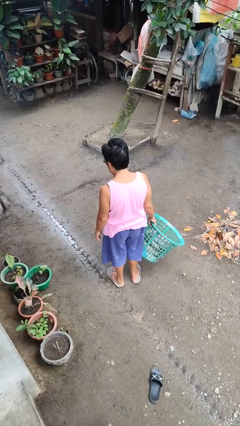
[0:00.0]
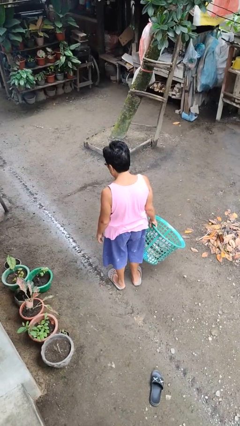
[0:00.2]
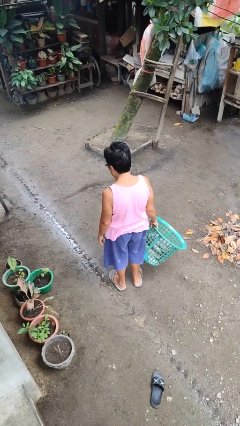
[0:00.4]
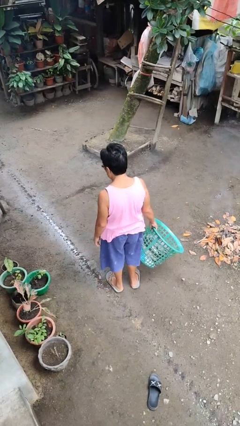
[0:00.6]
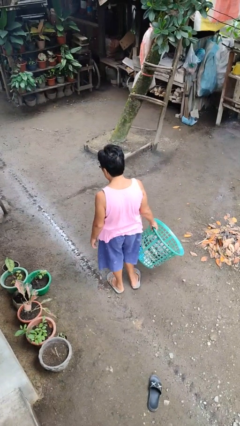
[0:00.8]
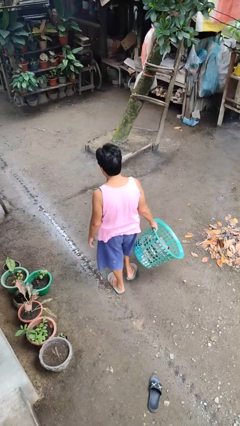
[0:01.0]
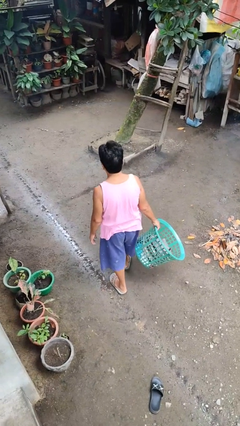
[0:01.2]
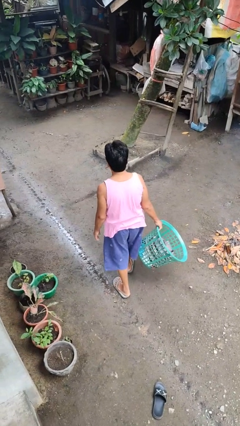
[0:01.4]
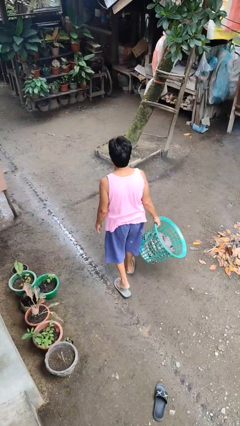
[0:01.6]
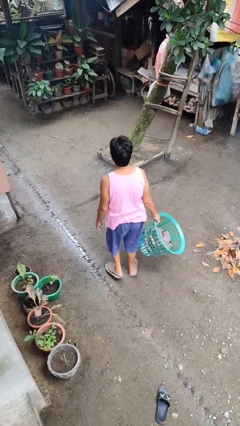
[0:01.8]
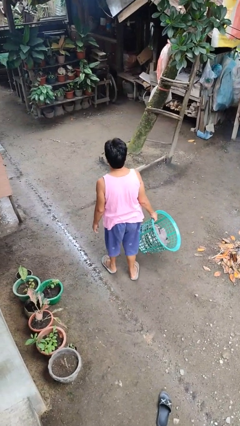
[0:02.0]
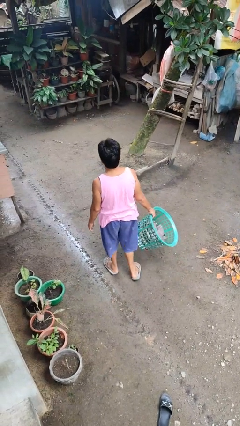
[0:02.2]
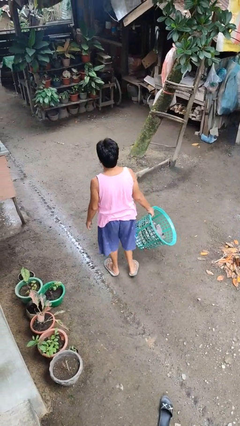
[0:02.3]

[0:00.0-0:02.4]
person carries laundry basket

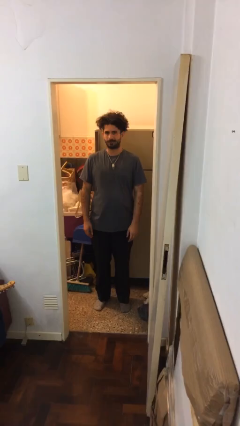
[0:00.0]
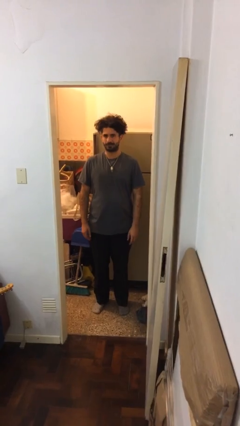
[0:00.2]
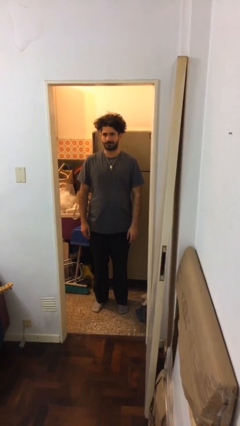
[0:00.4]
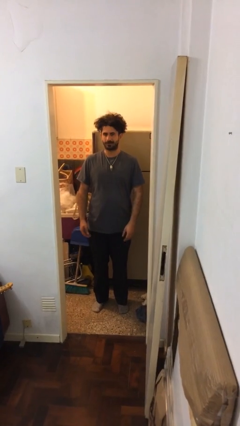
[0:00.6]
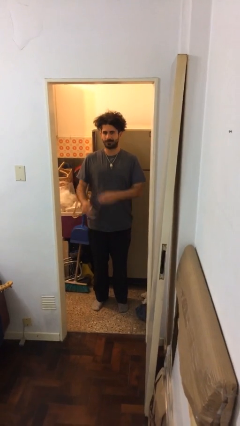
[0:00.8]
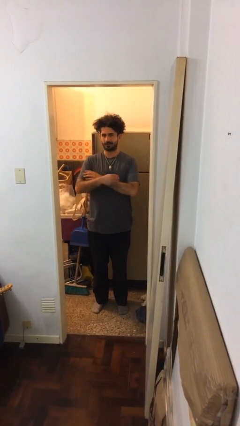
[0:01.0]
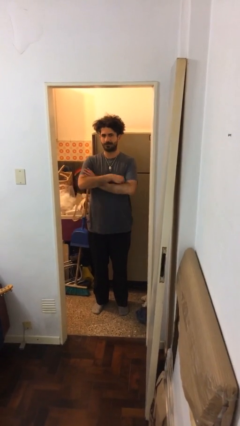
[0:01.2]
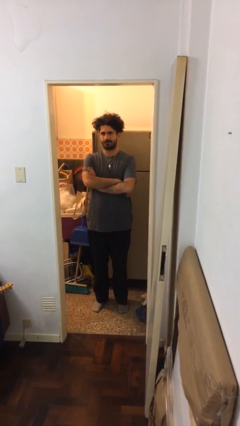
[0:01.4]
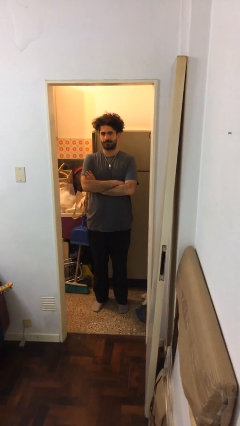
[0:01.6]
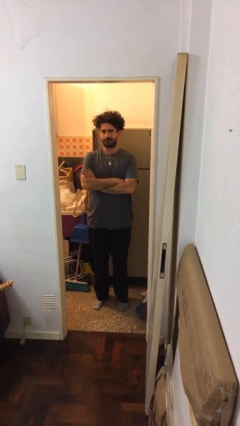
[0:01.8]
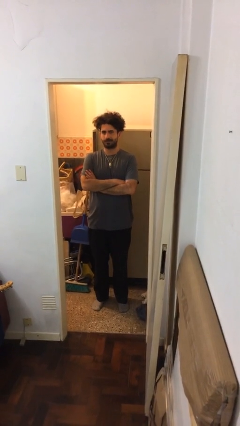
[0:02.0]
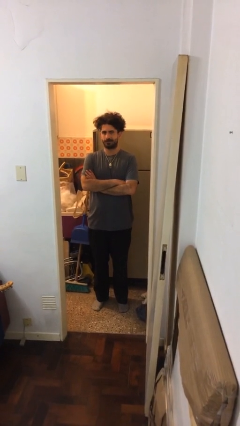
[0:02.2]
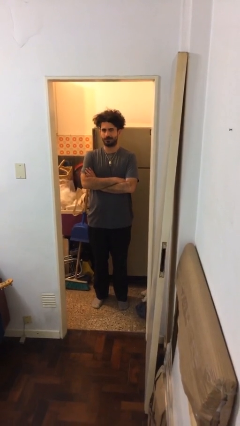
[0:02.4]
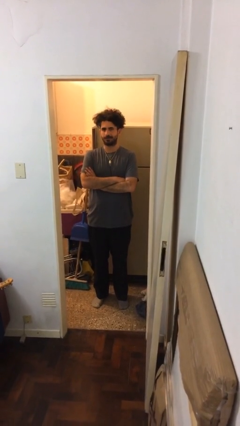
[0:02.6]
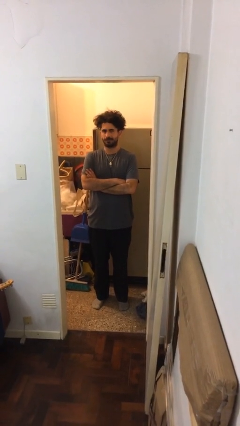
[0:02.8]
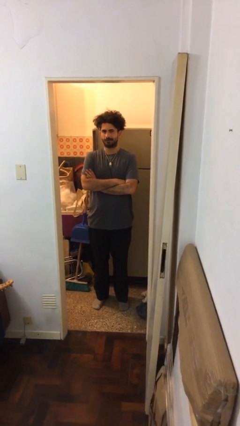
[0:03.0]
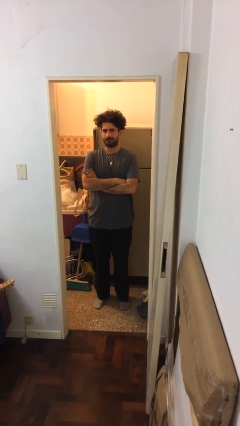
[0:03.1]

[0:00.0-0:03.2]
person crosses arms

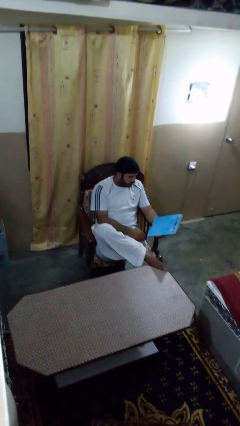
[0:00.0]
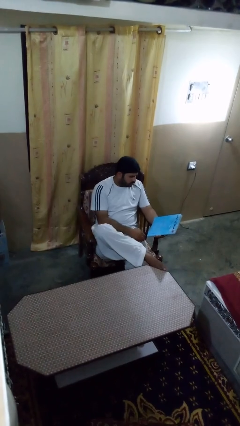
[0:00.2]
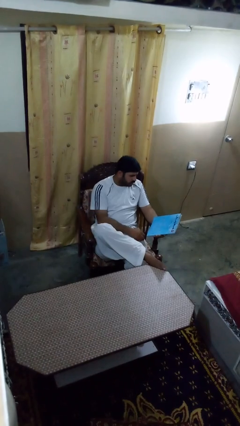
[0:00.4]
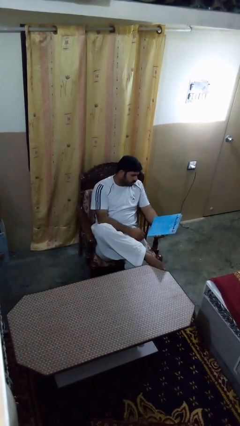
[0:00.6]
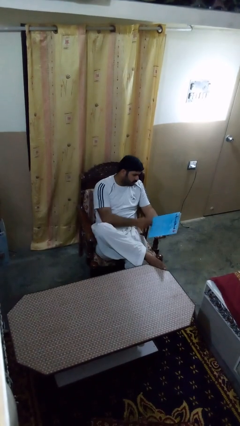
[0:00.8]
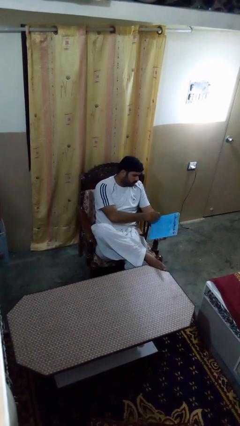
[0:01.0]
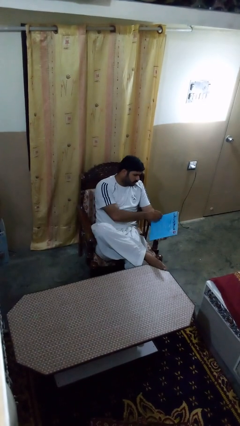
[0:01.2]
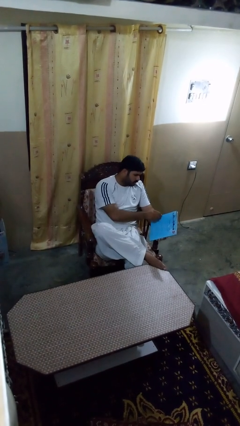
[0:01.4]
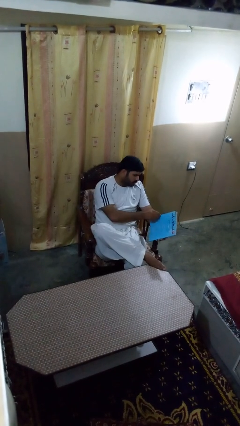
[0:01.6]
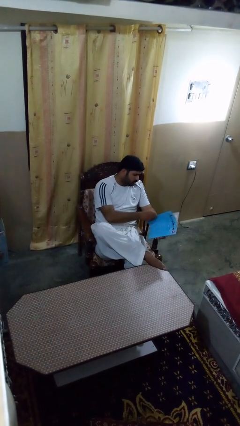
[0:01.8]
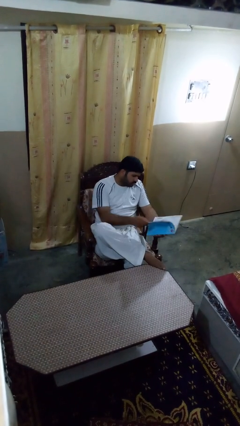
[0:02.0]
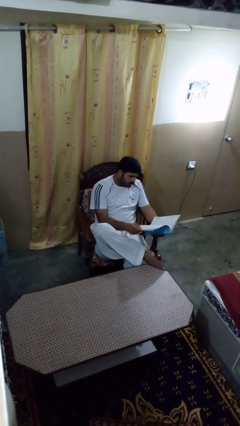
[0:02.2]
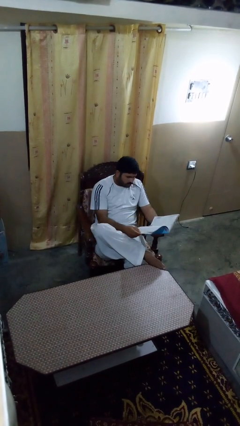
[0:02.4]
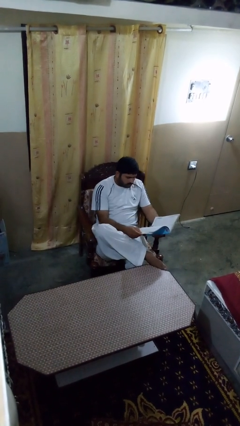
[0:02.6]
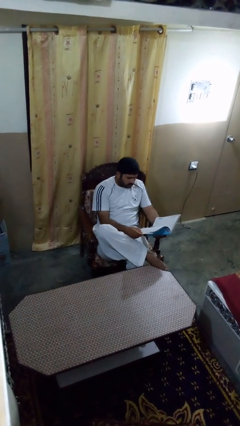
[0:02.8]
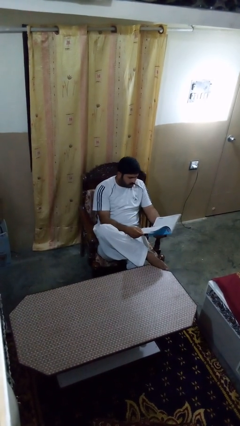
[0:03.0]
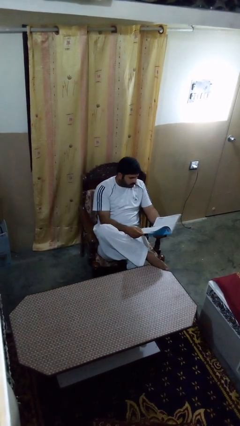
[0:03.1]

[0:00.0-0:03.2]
person reads magazine

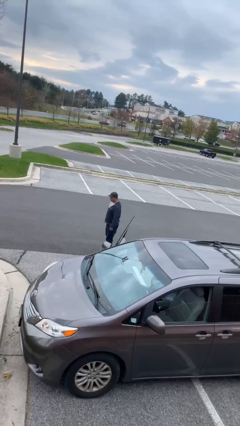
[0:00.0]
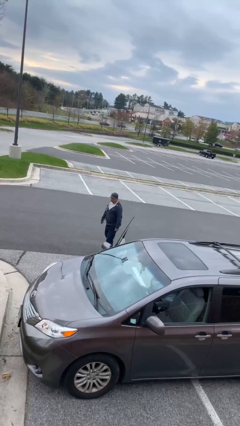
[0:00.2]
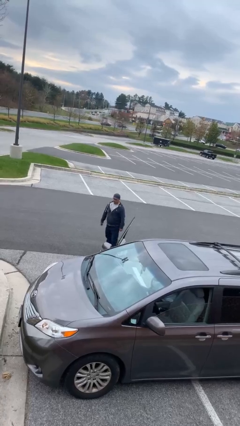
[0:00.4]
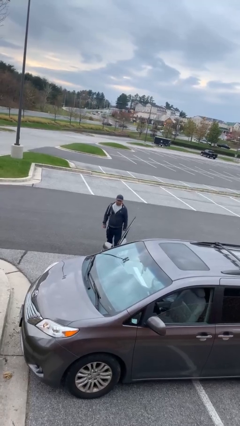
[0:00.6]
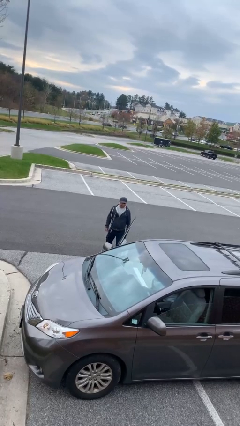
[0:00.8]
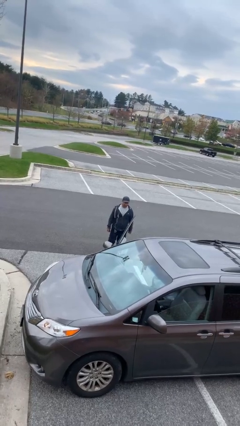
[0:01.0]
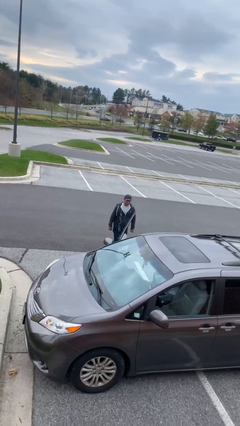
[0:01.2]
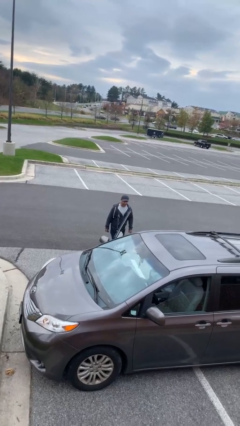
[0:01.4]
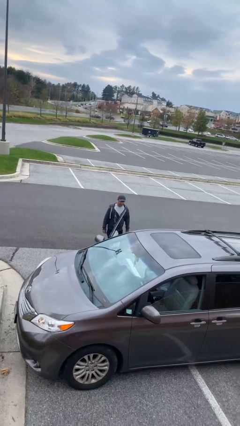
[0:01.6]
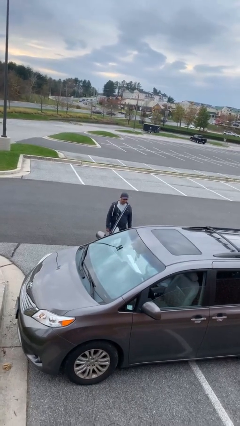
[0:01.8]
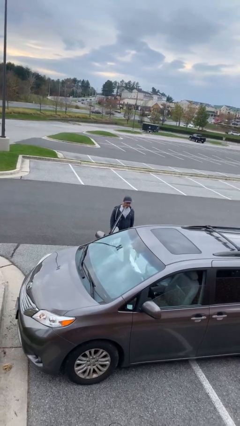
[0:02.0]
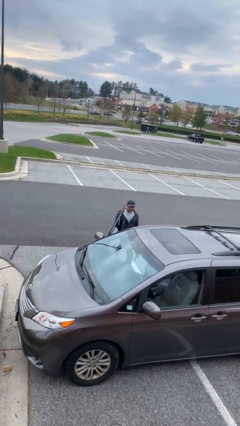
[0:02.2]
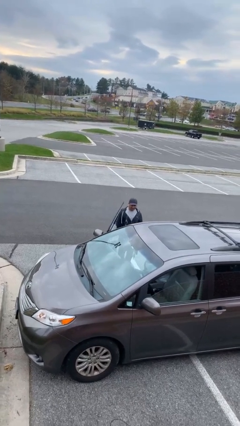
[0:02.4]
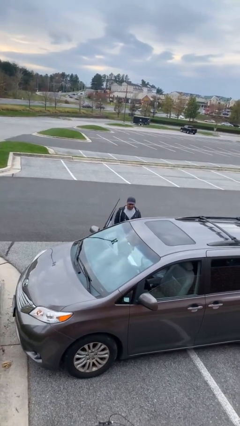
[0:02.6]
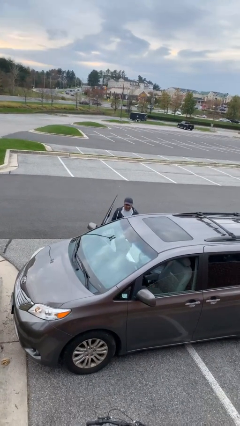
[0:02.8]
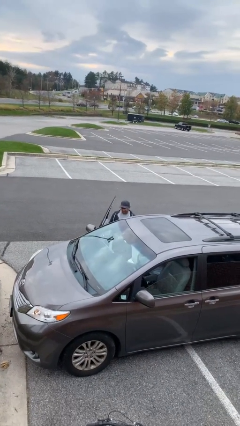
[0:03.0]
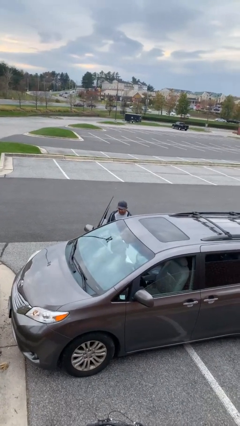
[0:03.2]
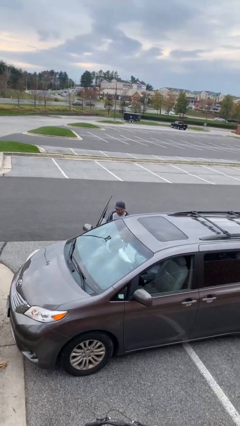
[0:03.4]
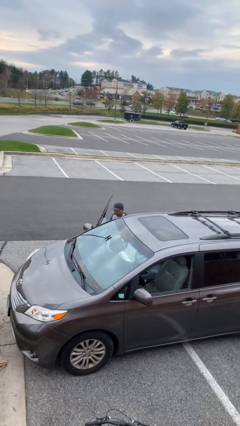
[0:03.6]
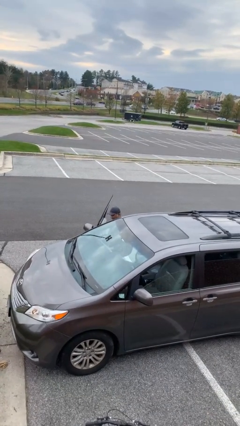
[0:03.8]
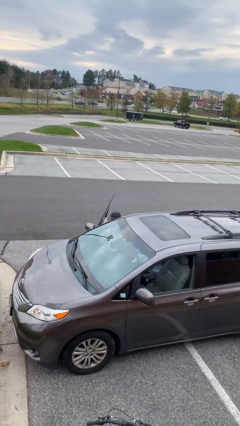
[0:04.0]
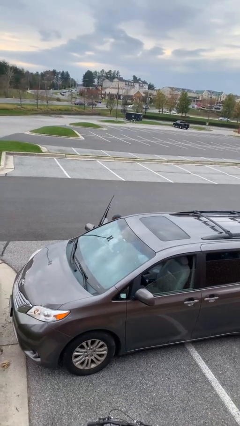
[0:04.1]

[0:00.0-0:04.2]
person enters car

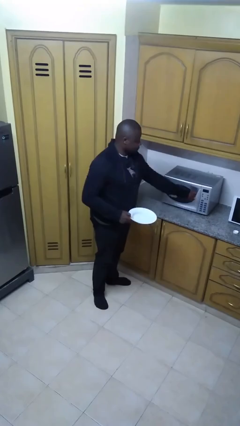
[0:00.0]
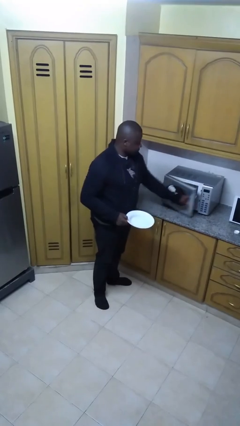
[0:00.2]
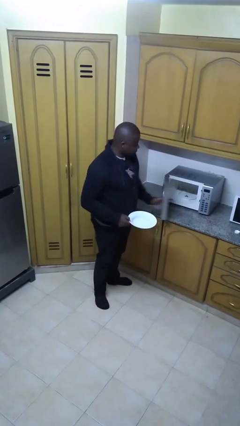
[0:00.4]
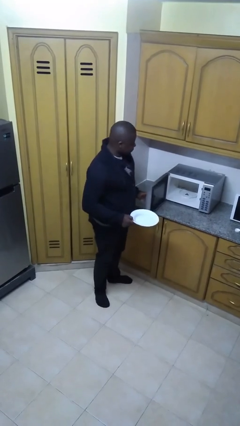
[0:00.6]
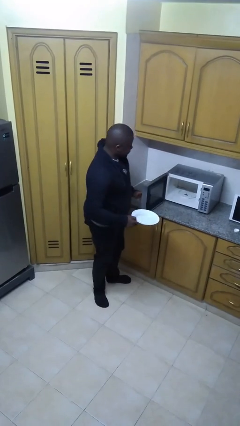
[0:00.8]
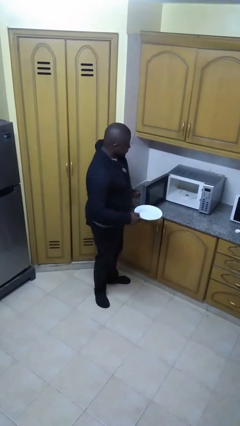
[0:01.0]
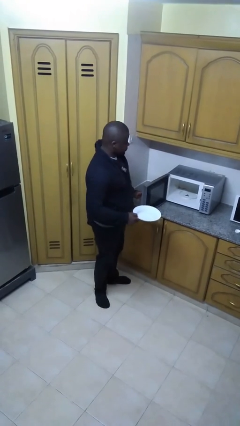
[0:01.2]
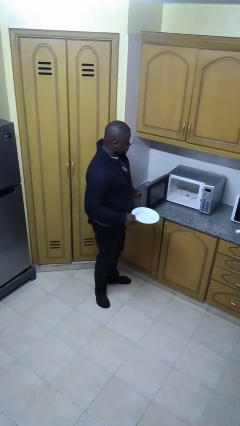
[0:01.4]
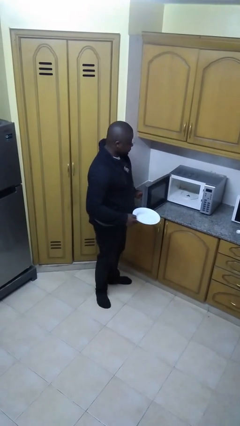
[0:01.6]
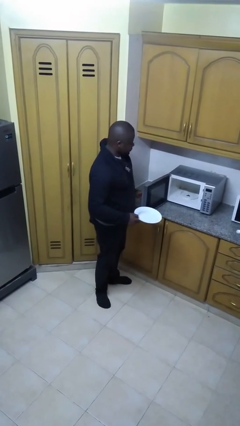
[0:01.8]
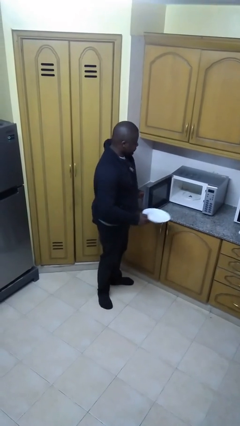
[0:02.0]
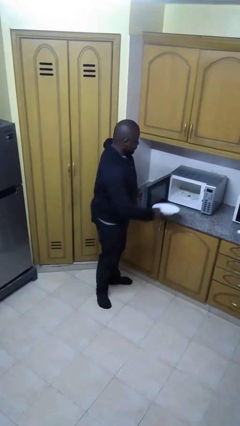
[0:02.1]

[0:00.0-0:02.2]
person opens microwave

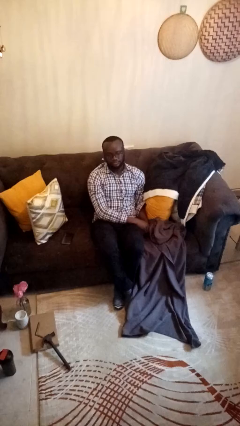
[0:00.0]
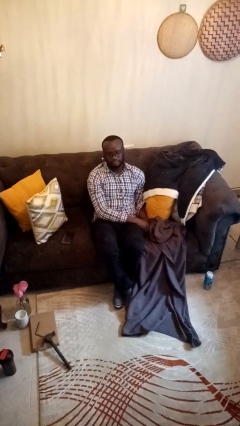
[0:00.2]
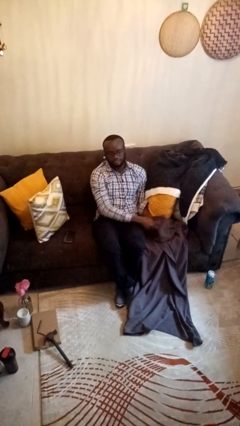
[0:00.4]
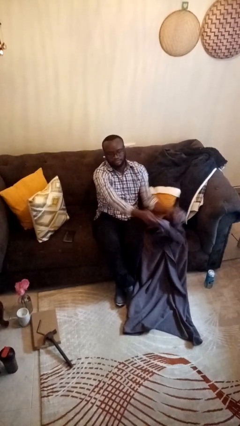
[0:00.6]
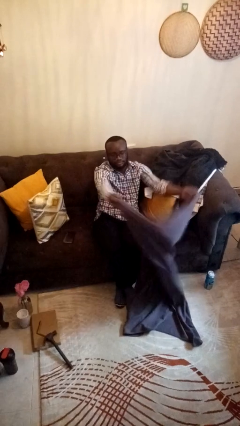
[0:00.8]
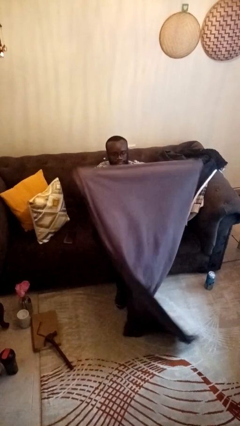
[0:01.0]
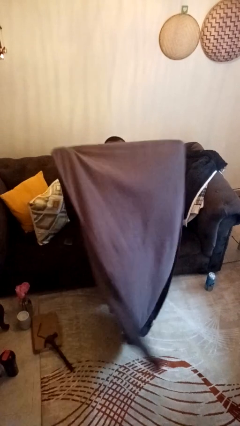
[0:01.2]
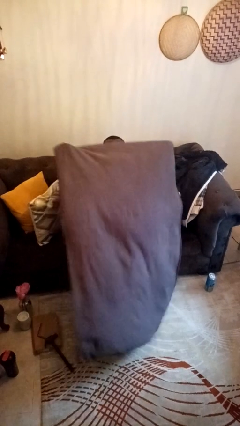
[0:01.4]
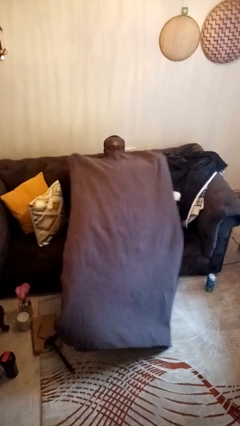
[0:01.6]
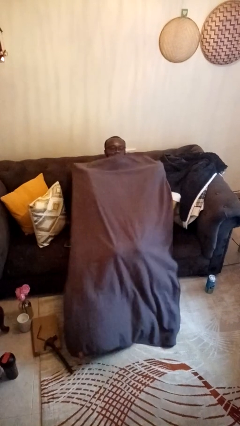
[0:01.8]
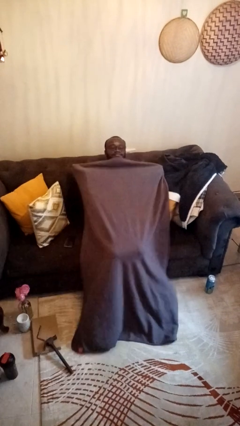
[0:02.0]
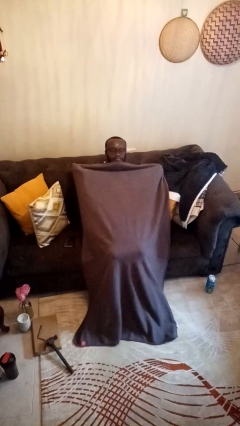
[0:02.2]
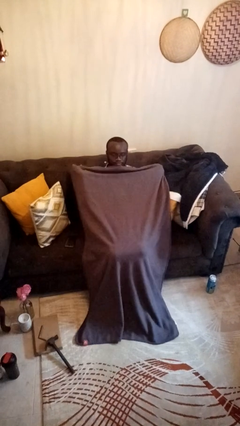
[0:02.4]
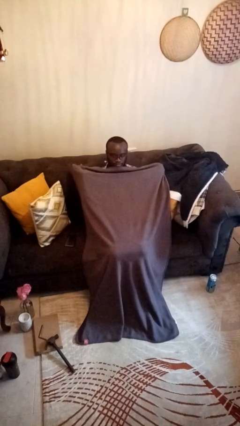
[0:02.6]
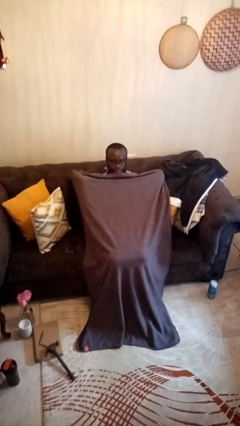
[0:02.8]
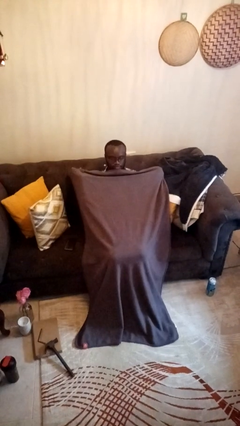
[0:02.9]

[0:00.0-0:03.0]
person covers with blanket
